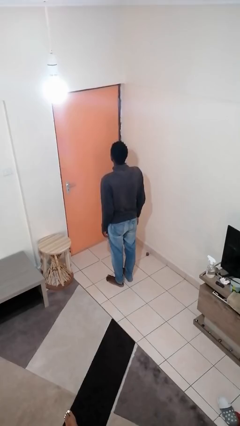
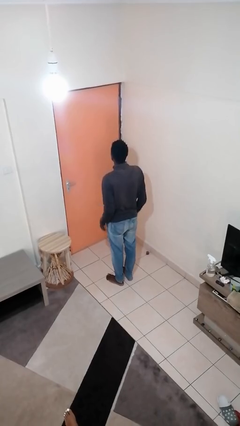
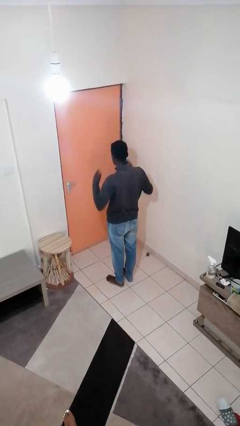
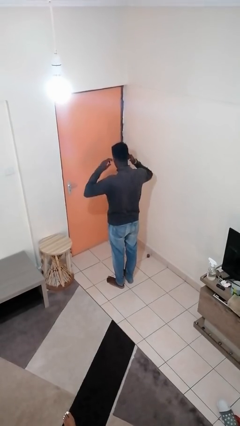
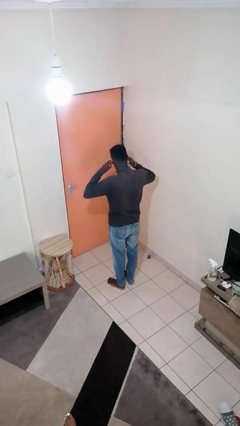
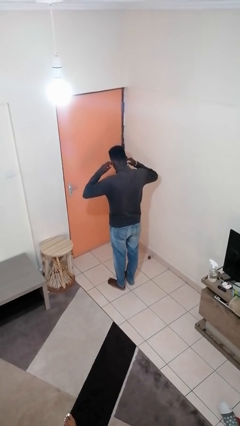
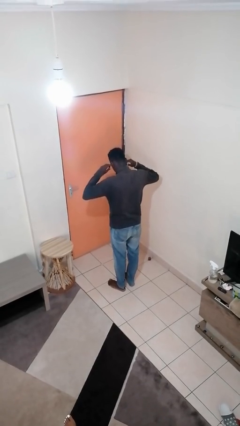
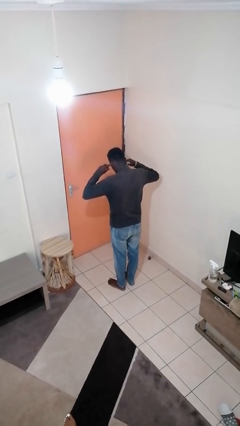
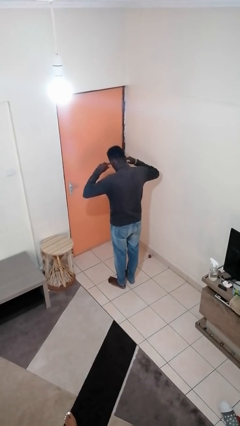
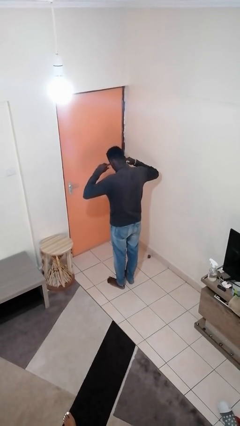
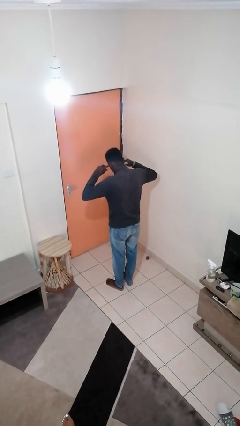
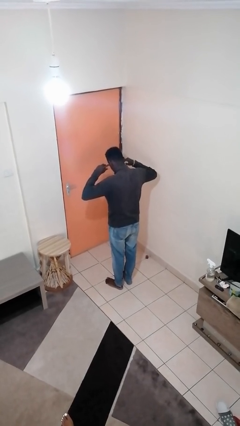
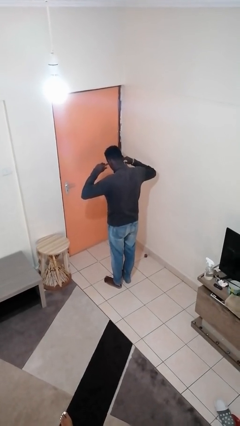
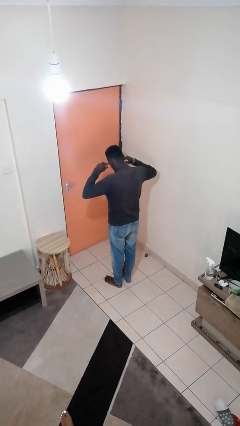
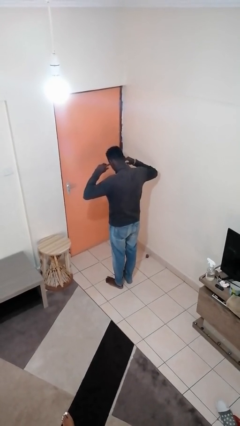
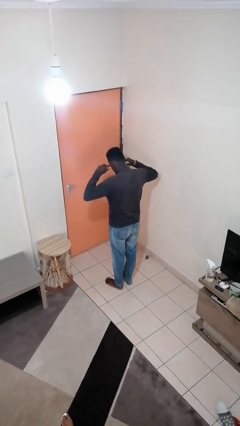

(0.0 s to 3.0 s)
person puts fingers in ear

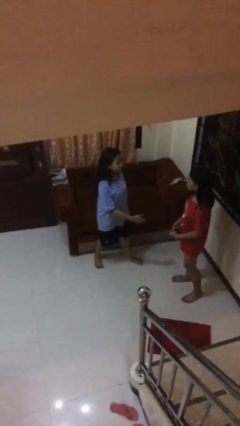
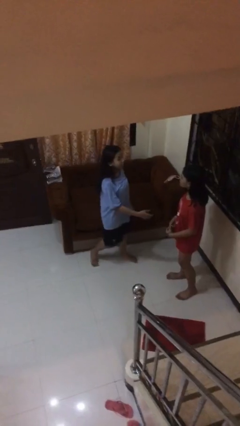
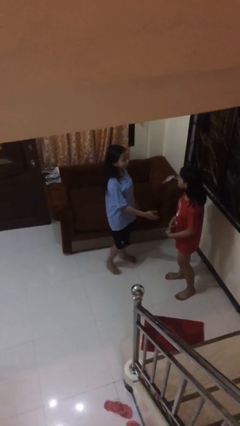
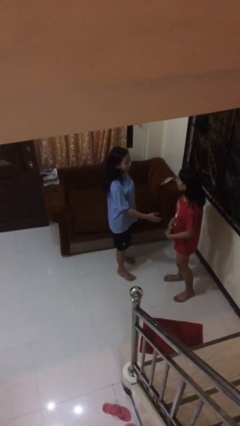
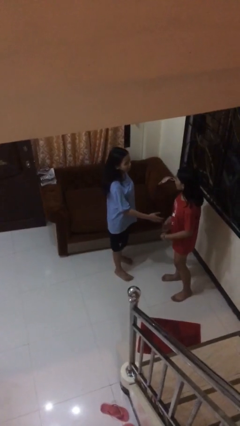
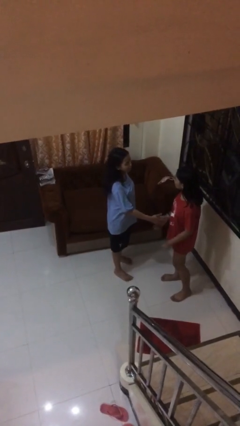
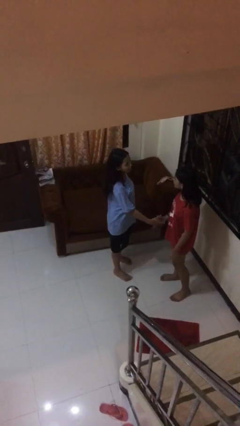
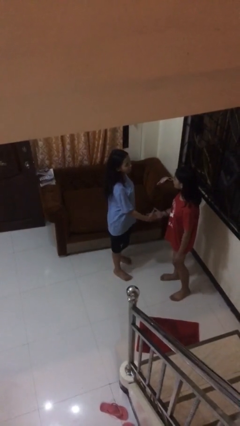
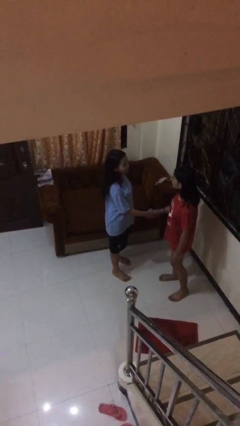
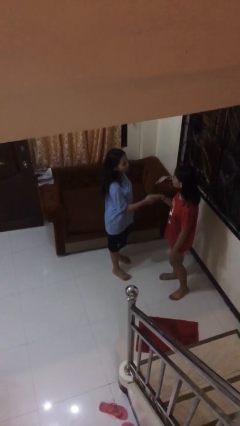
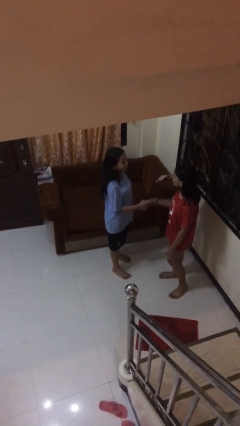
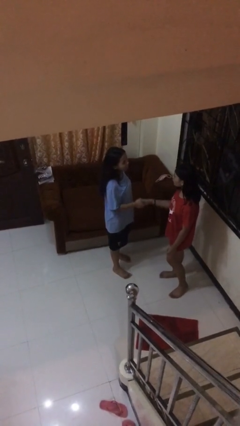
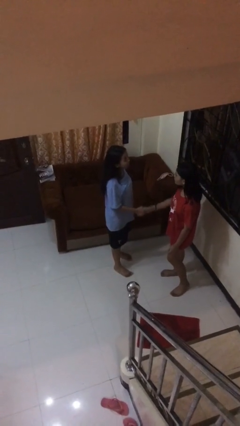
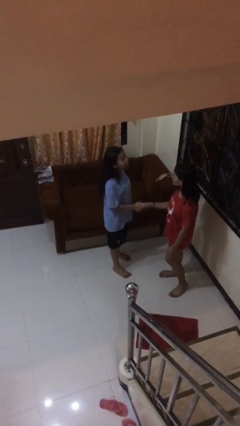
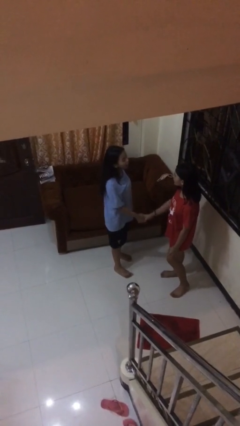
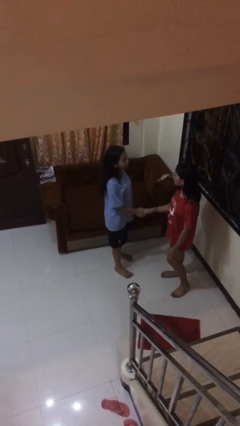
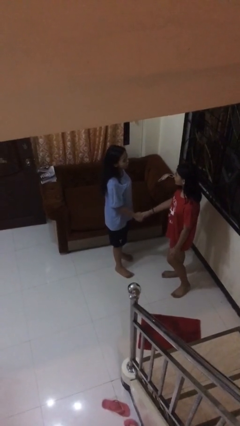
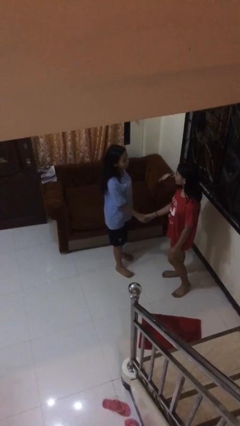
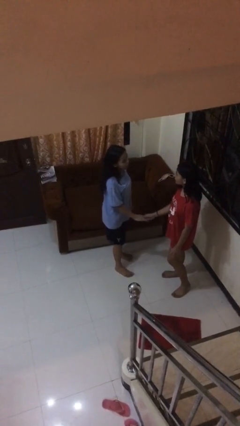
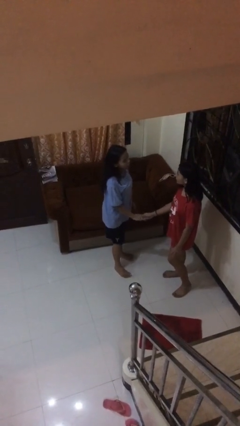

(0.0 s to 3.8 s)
person shakes hand

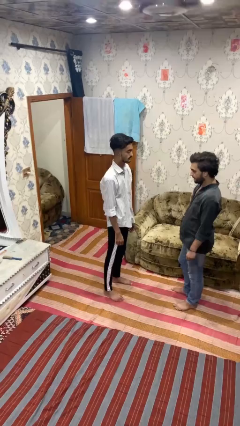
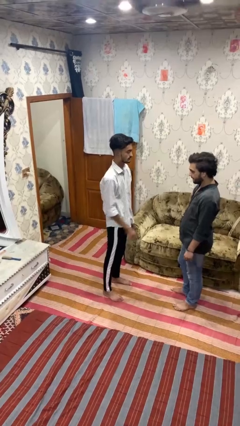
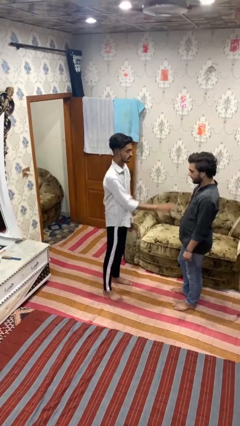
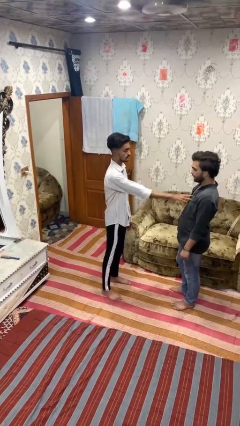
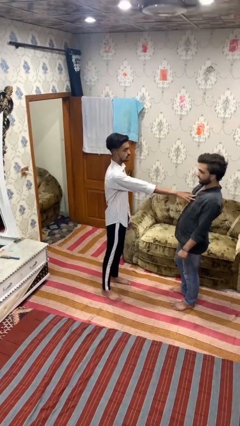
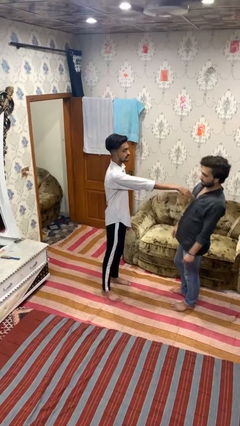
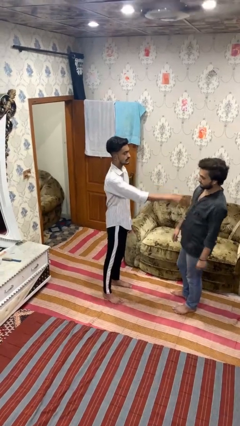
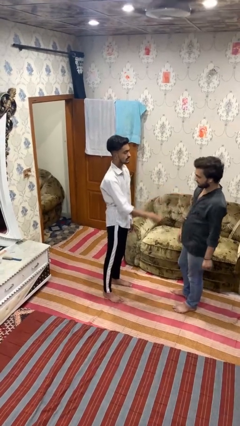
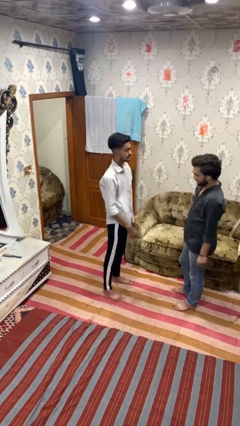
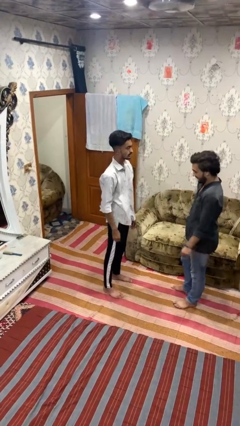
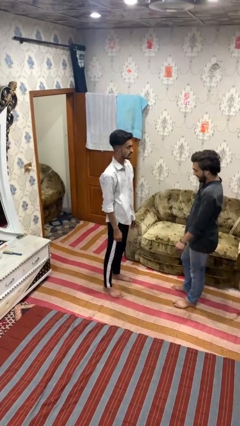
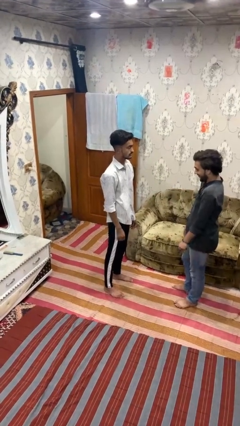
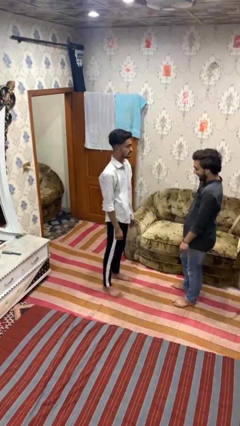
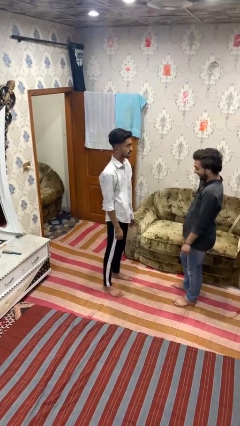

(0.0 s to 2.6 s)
person shoves person

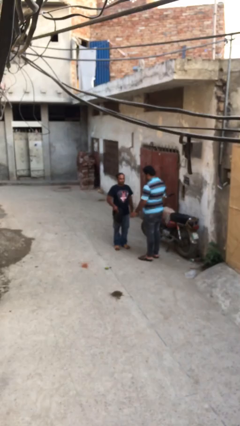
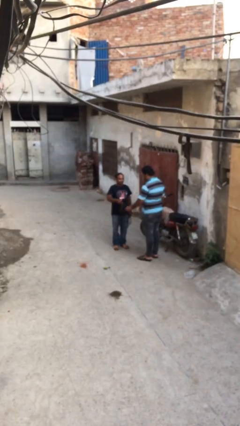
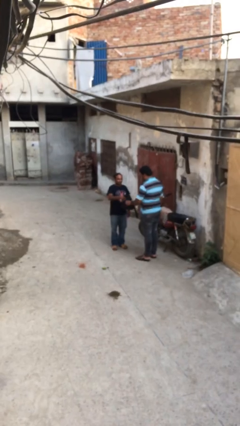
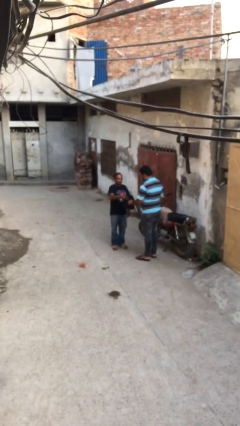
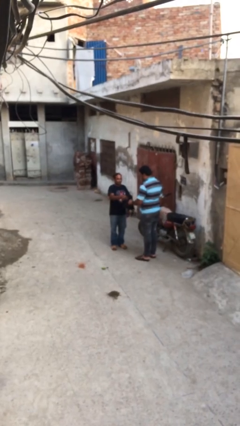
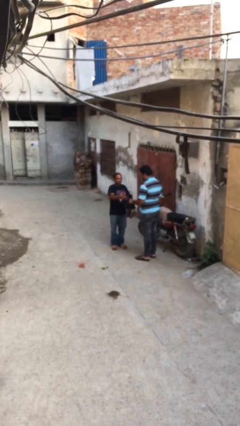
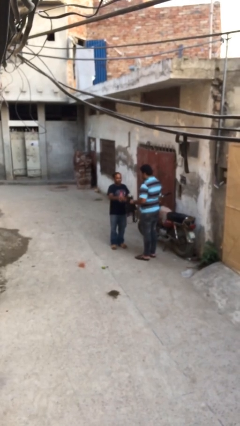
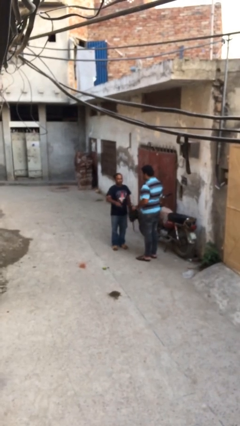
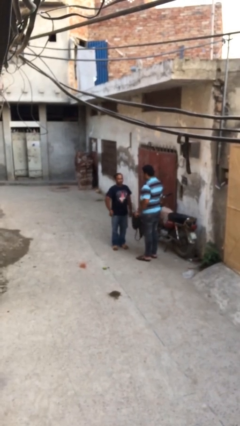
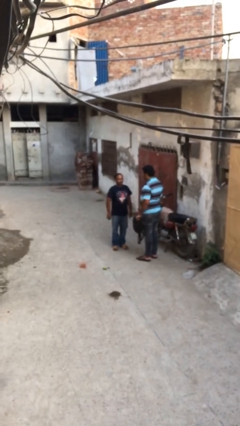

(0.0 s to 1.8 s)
person transfers object to person

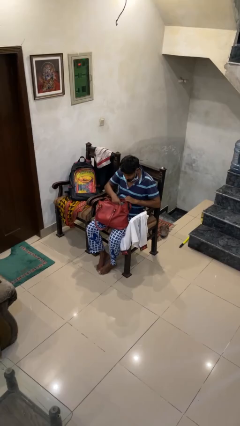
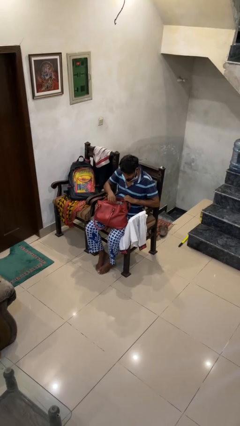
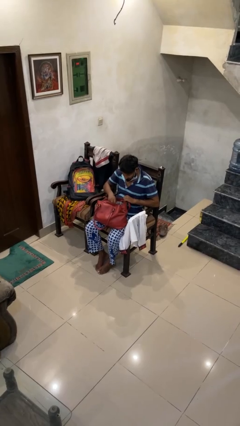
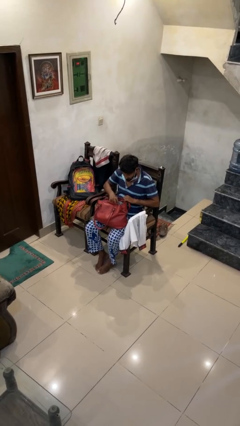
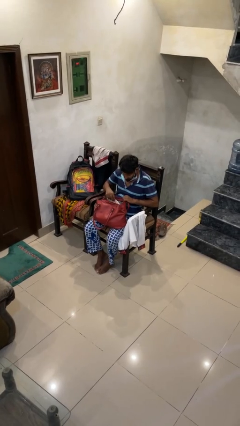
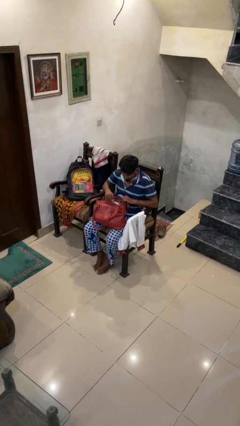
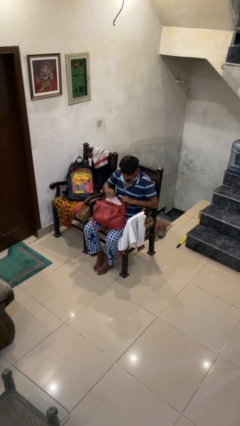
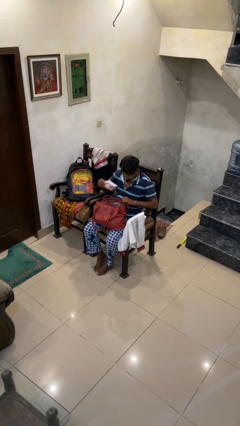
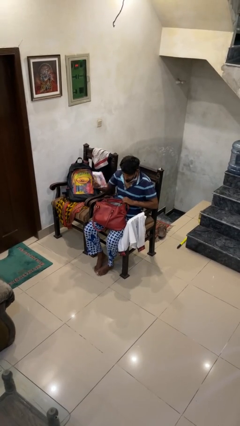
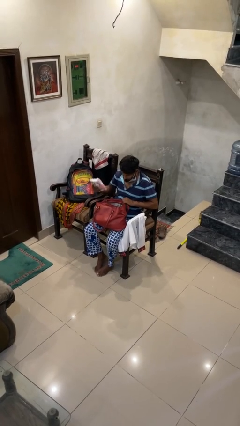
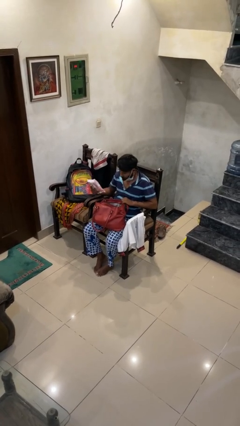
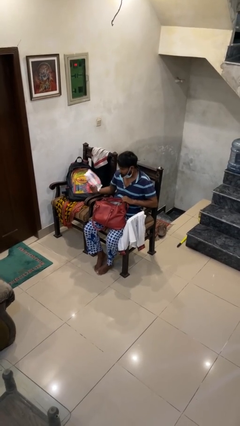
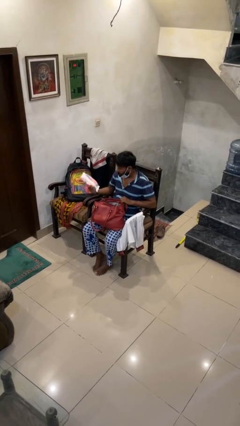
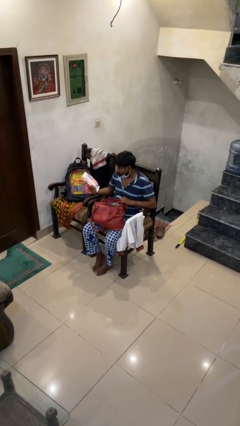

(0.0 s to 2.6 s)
person takes object from purse

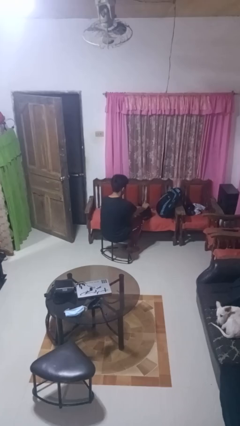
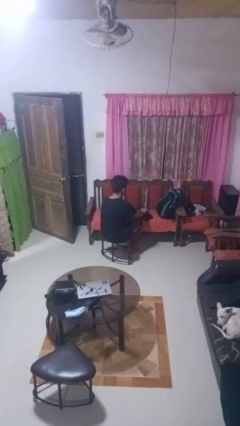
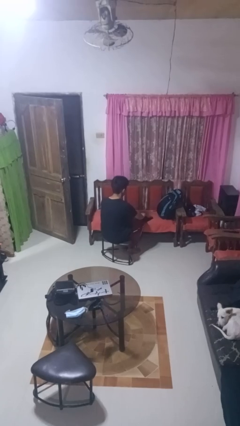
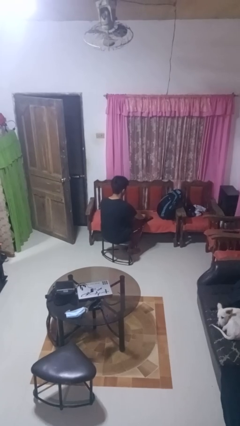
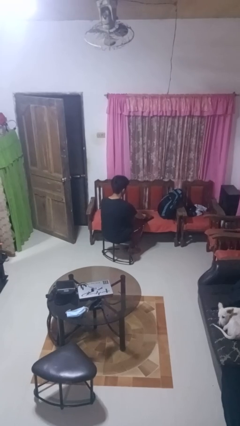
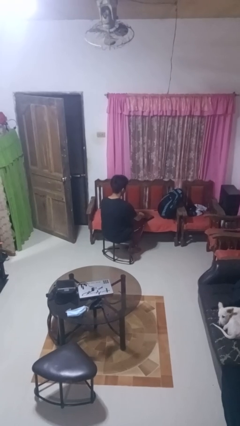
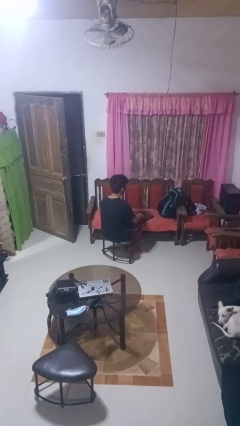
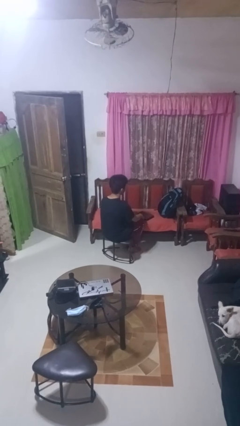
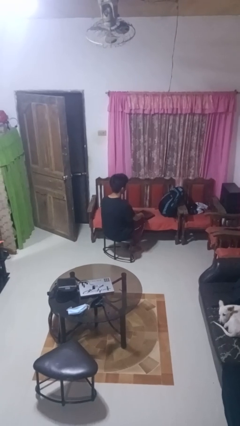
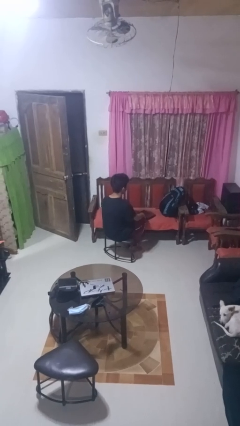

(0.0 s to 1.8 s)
person closes laptop

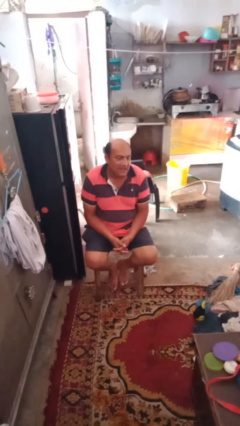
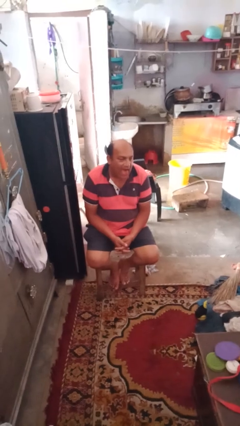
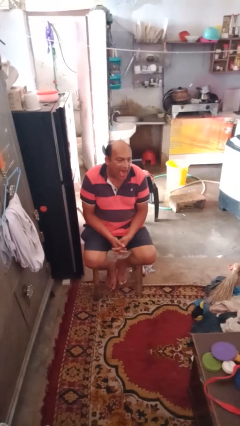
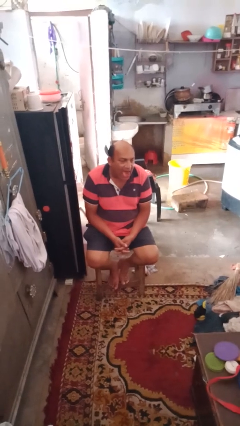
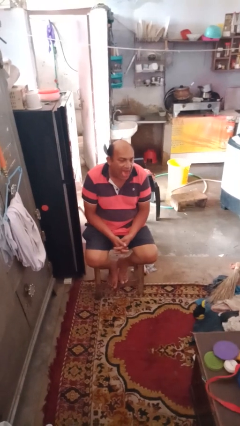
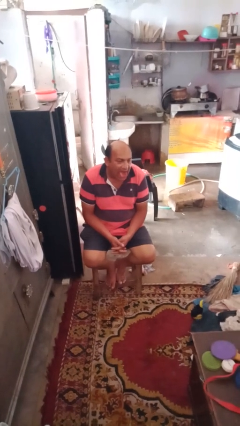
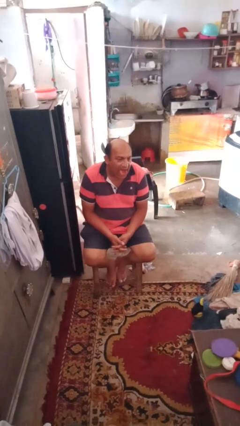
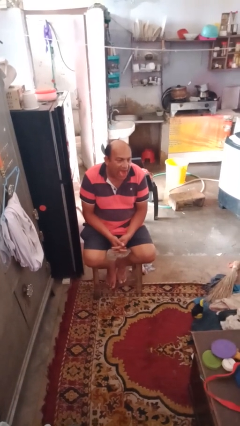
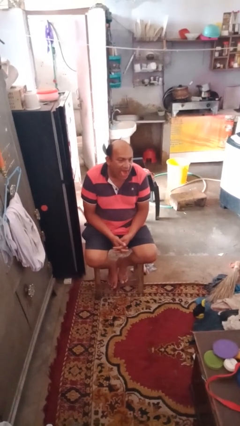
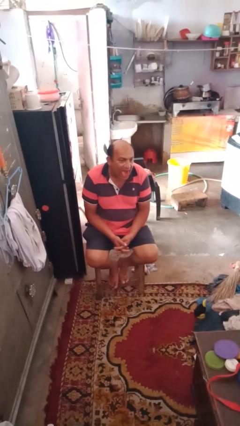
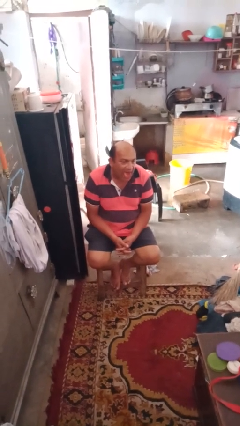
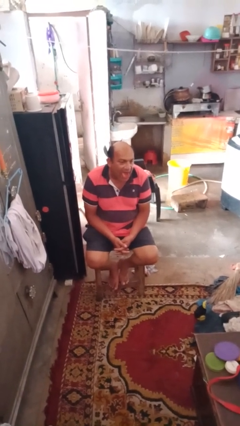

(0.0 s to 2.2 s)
person sticks out tongue
